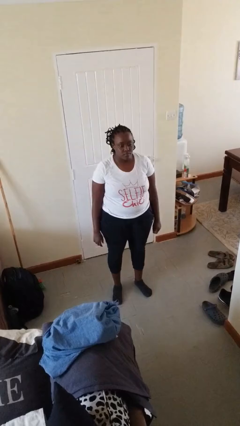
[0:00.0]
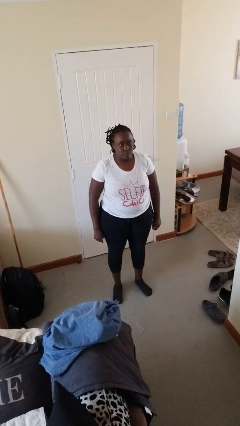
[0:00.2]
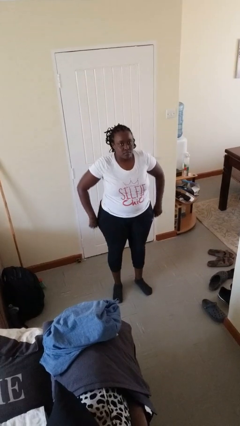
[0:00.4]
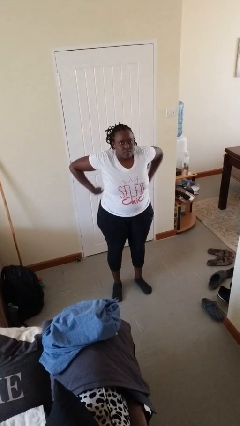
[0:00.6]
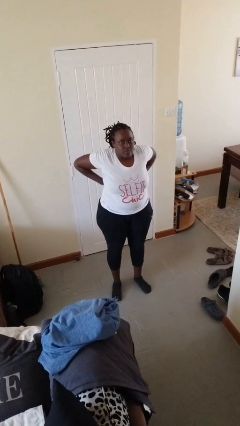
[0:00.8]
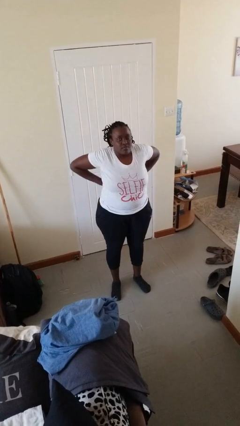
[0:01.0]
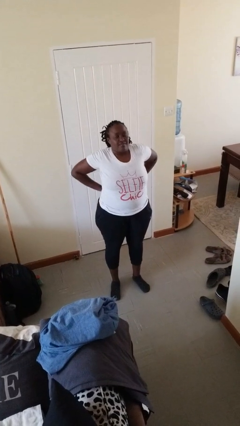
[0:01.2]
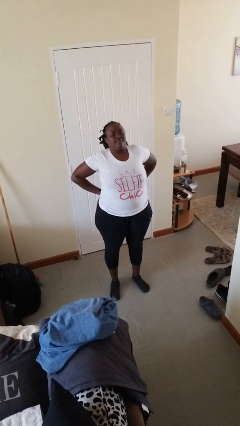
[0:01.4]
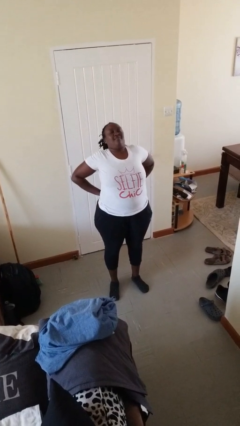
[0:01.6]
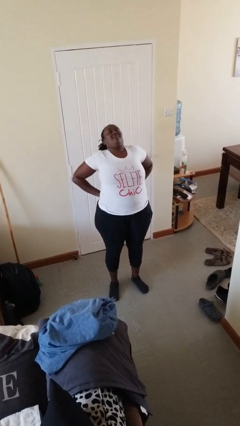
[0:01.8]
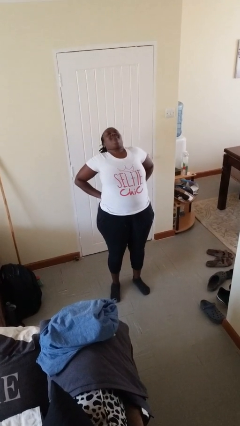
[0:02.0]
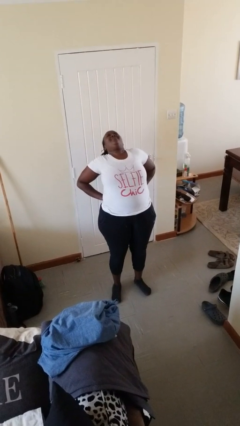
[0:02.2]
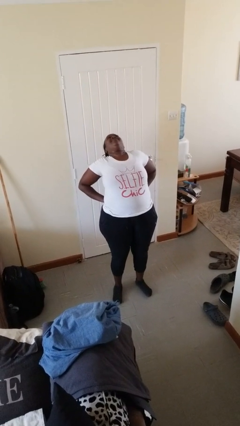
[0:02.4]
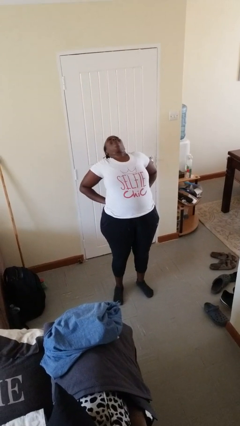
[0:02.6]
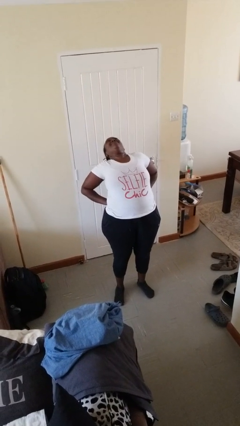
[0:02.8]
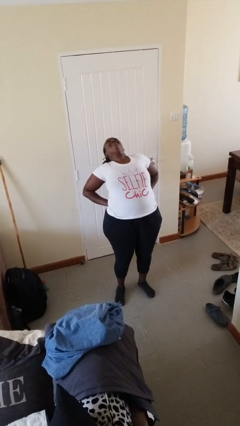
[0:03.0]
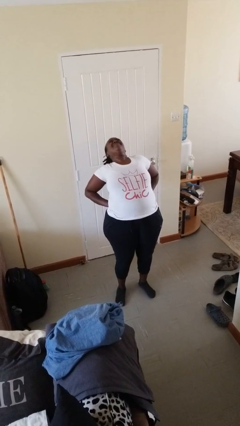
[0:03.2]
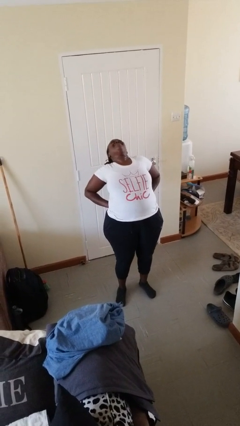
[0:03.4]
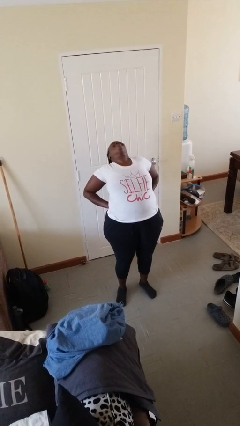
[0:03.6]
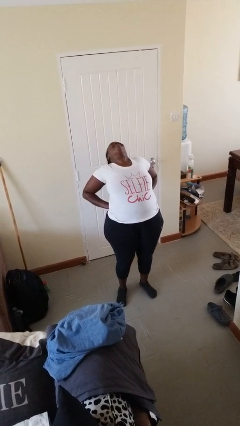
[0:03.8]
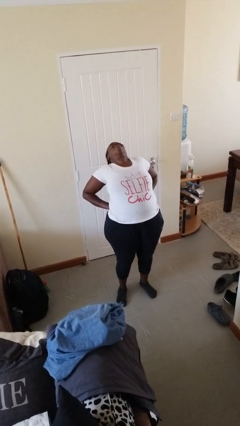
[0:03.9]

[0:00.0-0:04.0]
person stretches back

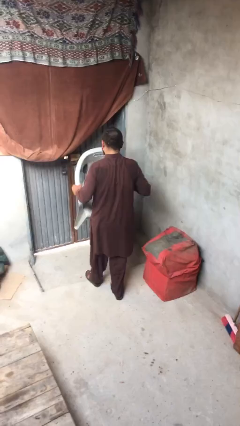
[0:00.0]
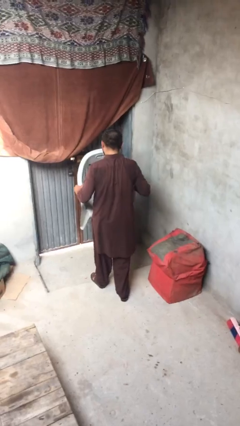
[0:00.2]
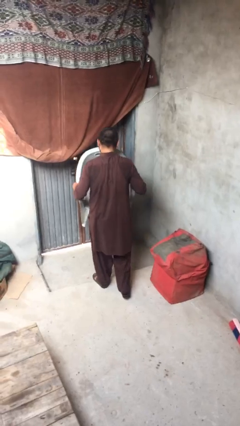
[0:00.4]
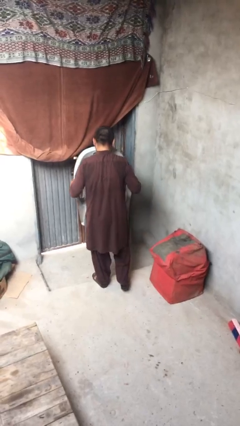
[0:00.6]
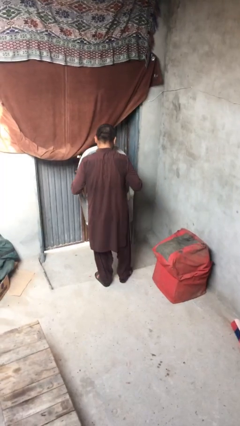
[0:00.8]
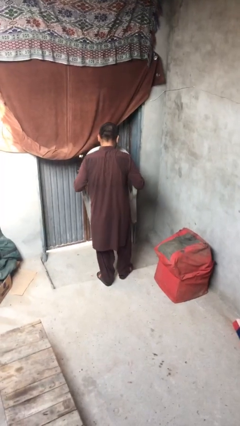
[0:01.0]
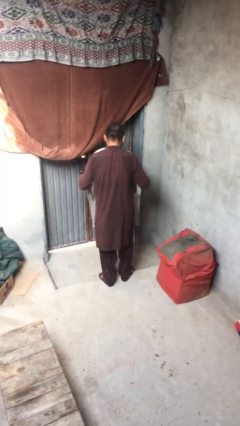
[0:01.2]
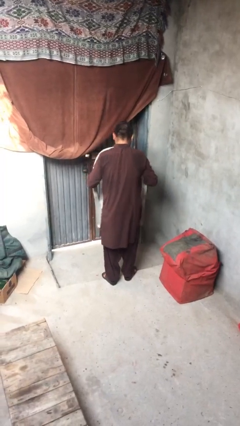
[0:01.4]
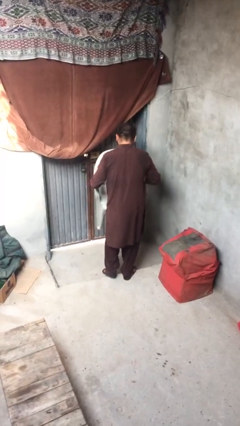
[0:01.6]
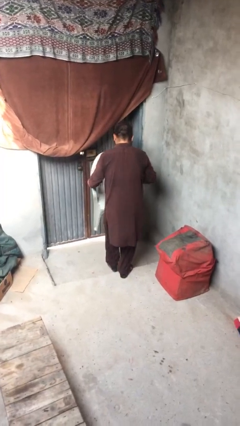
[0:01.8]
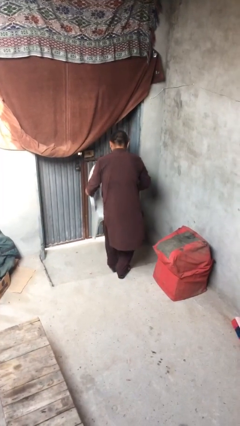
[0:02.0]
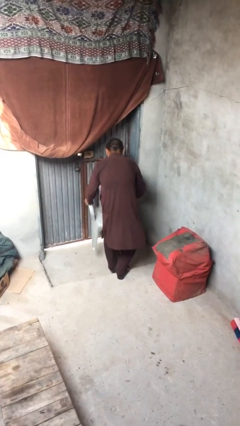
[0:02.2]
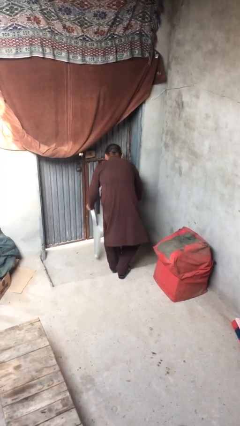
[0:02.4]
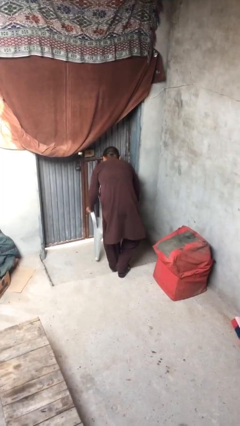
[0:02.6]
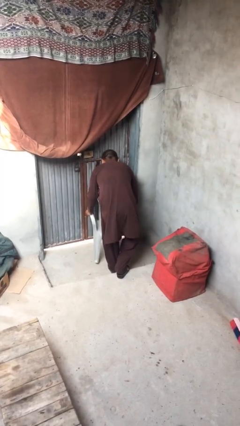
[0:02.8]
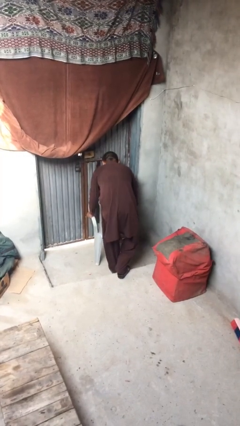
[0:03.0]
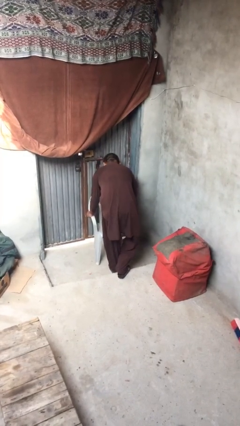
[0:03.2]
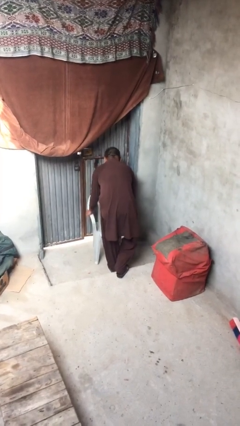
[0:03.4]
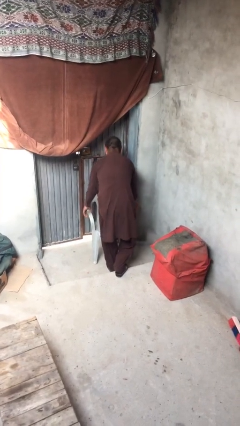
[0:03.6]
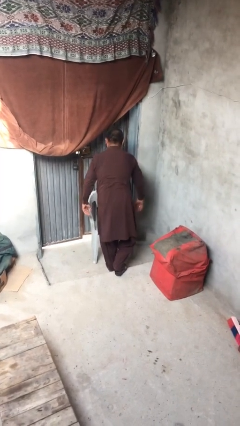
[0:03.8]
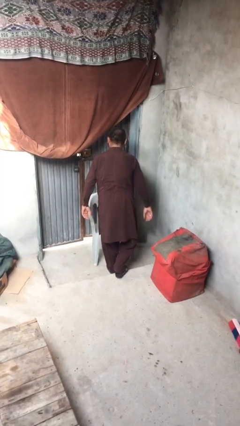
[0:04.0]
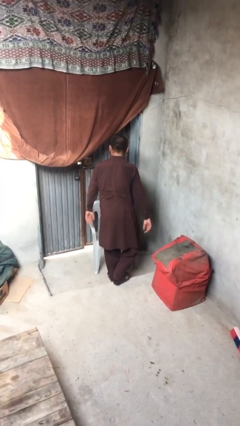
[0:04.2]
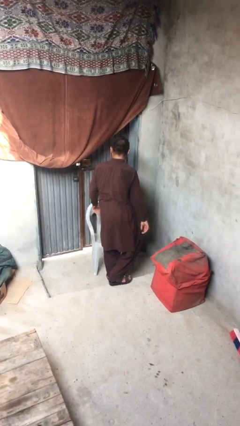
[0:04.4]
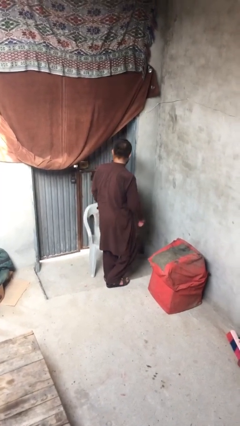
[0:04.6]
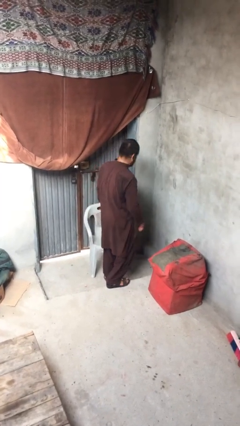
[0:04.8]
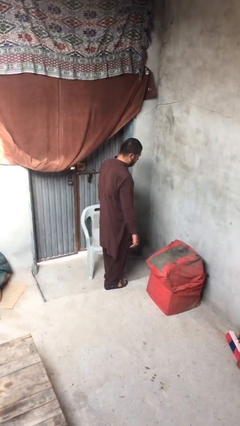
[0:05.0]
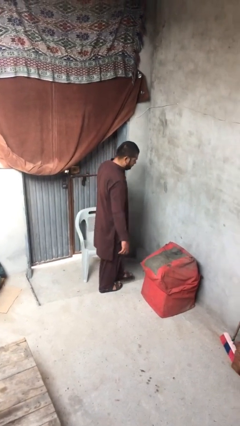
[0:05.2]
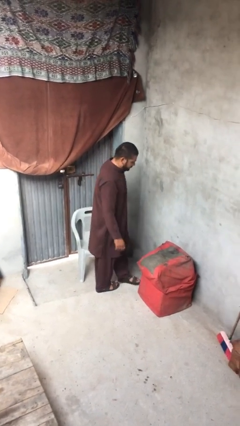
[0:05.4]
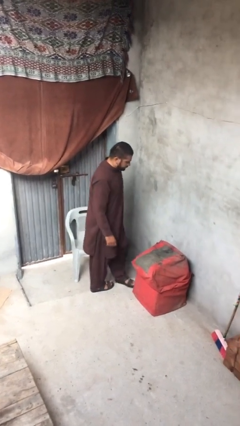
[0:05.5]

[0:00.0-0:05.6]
person puts down object on floor

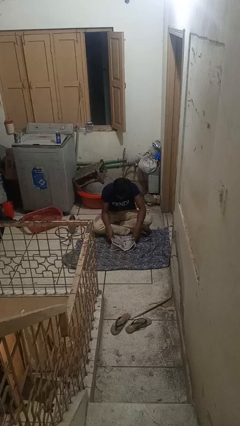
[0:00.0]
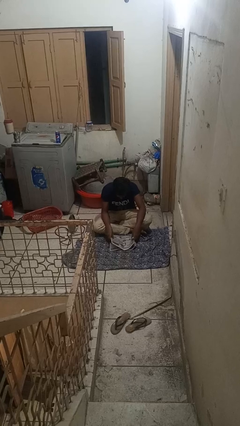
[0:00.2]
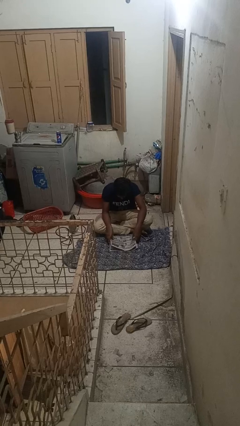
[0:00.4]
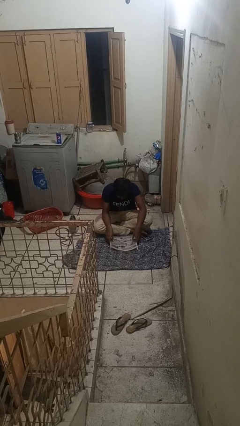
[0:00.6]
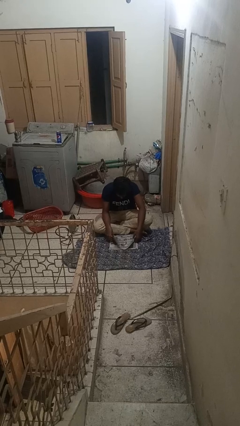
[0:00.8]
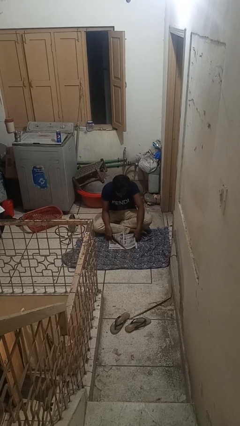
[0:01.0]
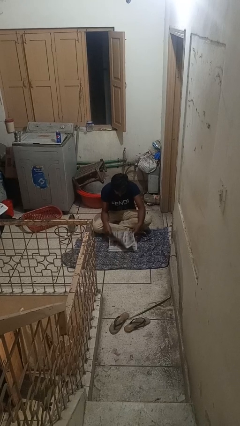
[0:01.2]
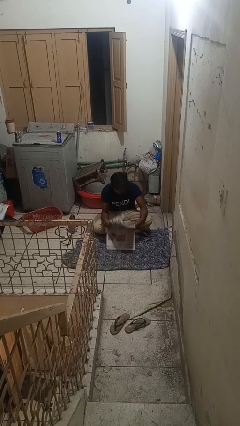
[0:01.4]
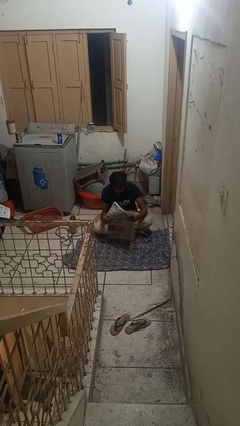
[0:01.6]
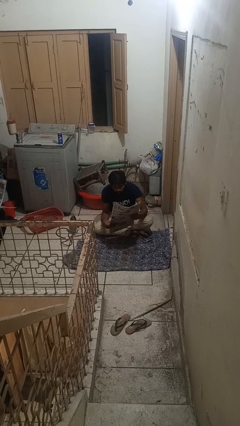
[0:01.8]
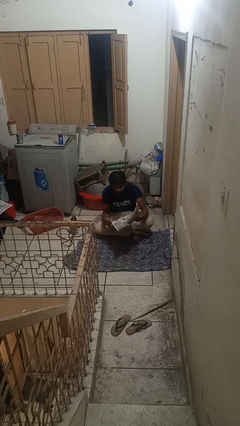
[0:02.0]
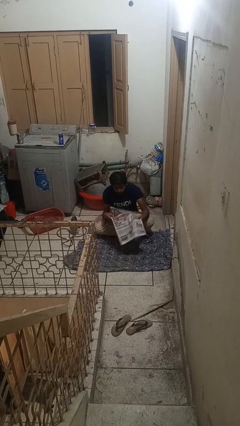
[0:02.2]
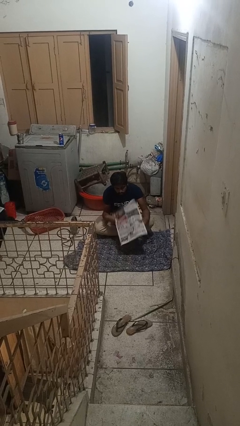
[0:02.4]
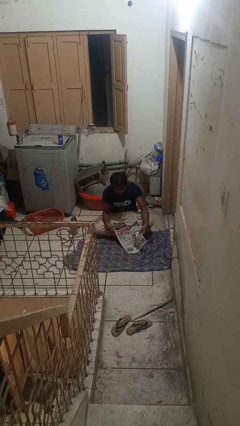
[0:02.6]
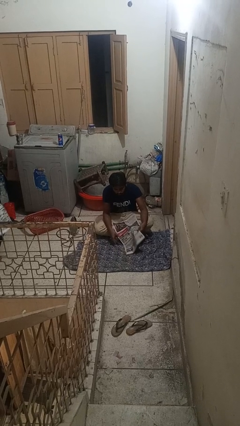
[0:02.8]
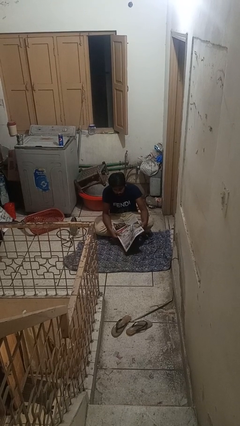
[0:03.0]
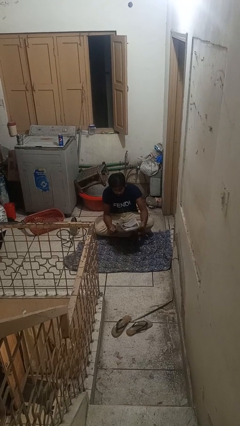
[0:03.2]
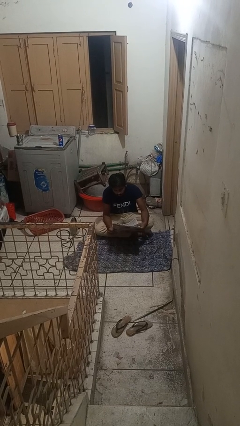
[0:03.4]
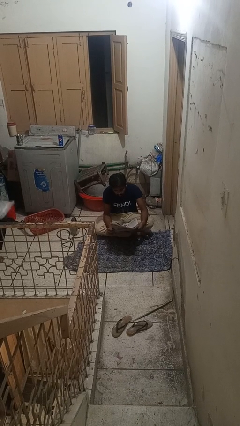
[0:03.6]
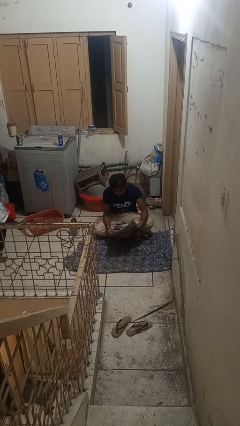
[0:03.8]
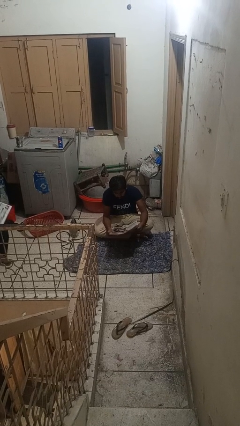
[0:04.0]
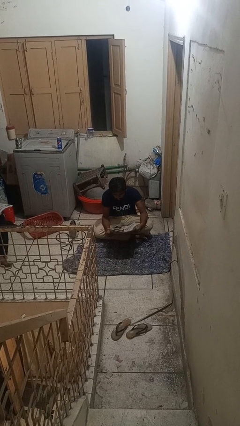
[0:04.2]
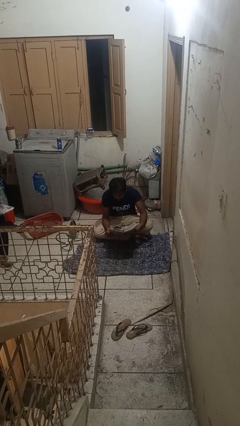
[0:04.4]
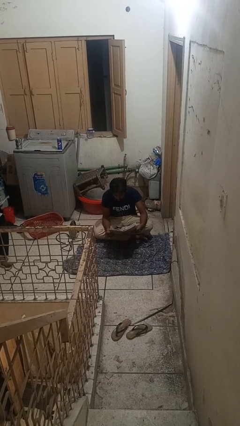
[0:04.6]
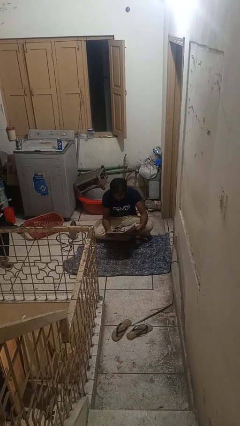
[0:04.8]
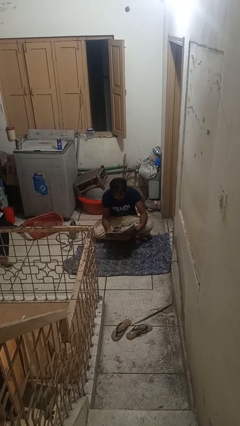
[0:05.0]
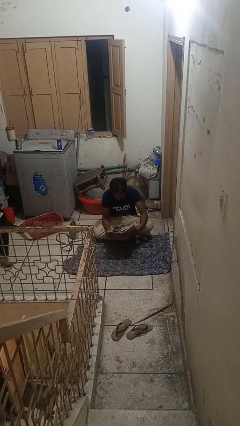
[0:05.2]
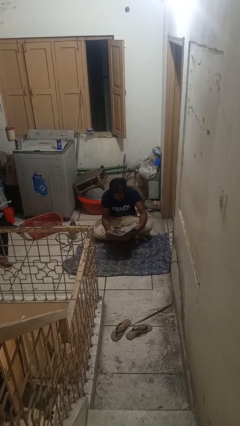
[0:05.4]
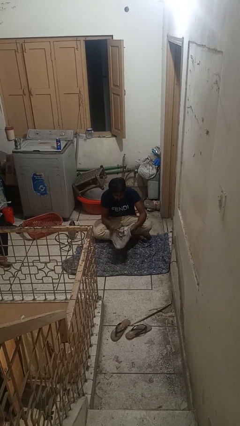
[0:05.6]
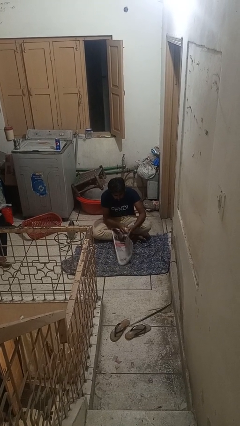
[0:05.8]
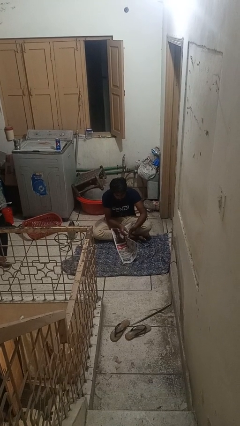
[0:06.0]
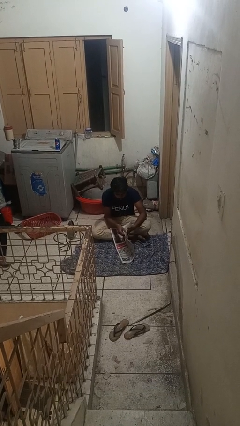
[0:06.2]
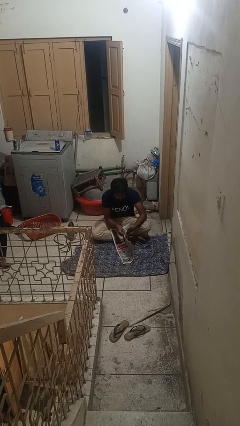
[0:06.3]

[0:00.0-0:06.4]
person reads newspaper

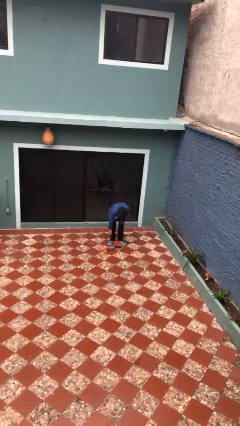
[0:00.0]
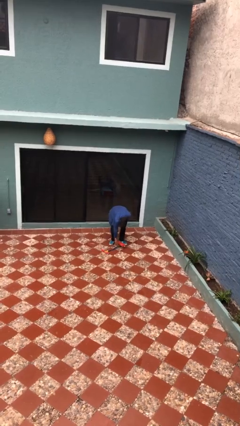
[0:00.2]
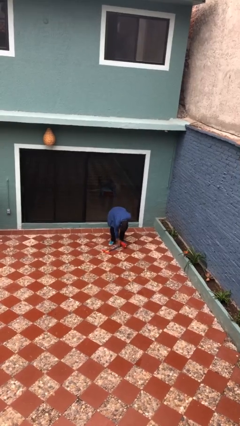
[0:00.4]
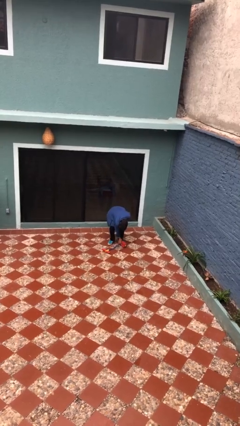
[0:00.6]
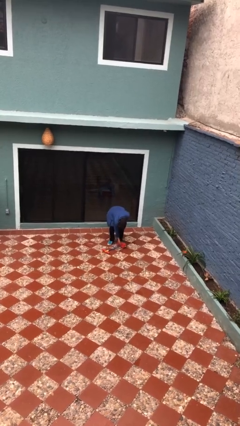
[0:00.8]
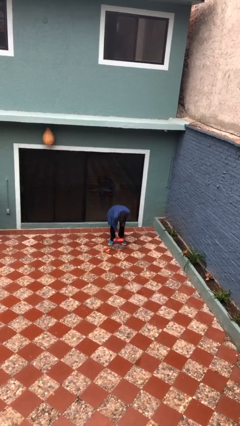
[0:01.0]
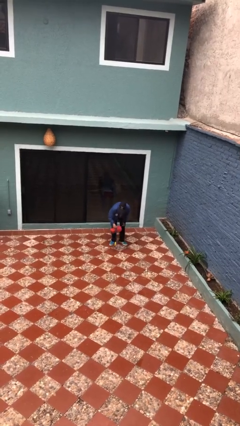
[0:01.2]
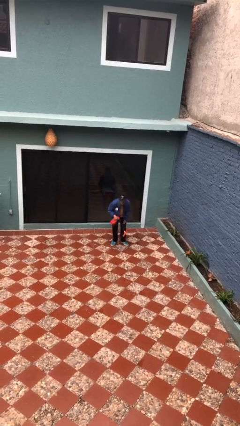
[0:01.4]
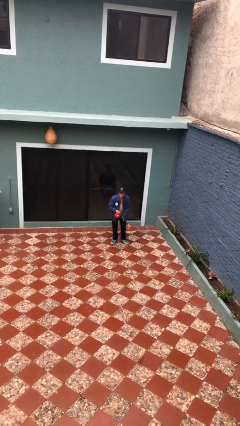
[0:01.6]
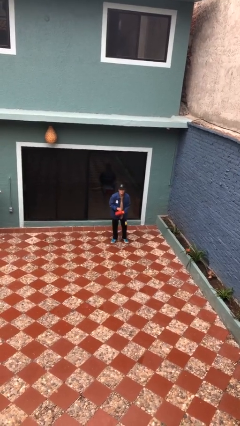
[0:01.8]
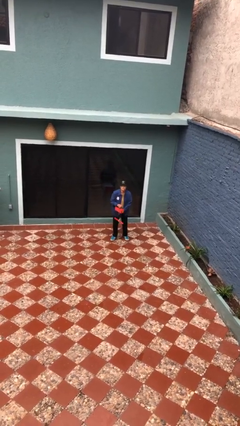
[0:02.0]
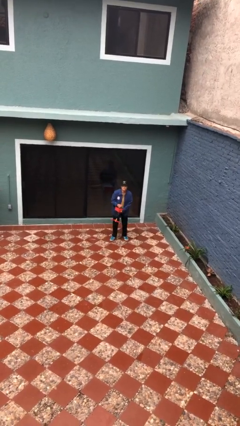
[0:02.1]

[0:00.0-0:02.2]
person picks up object from floor
